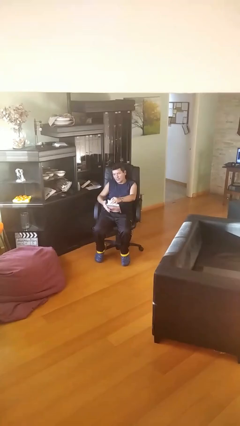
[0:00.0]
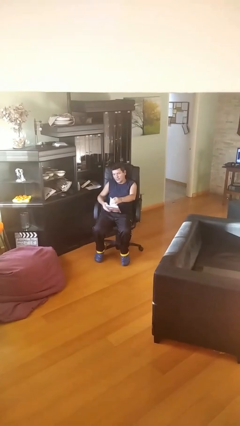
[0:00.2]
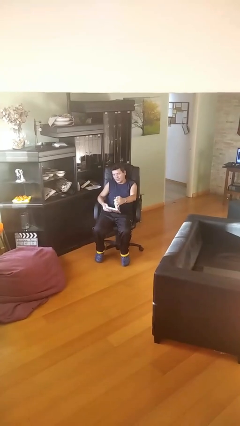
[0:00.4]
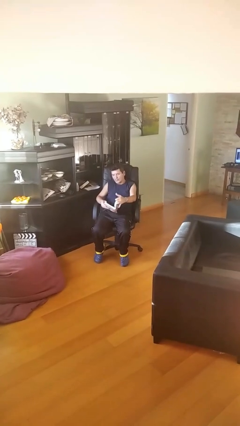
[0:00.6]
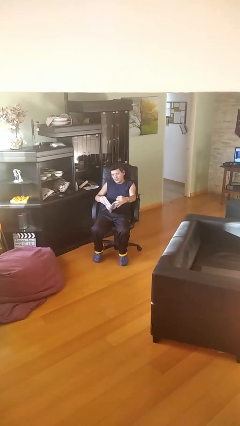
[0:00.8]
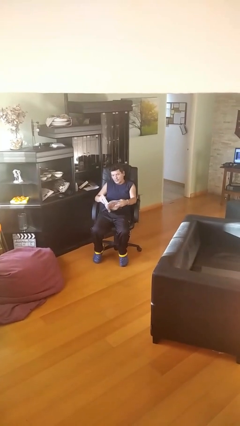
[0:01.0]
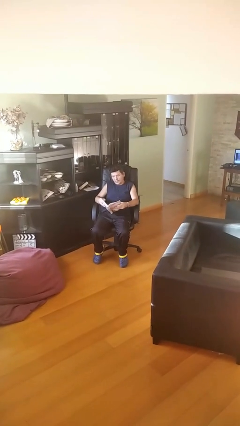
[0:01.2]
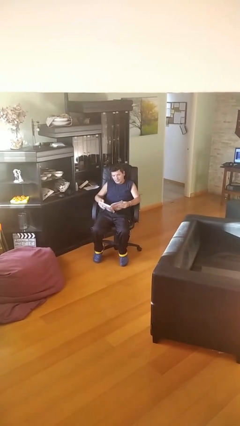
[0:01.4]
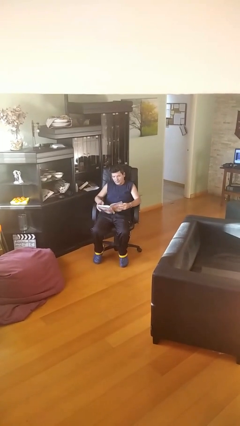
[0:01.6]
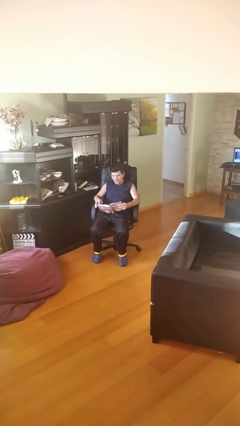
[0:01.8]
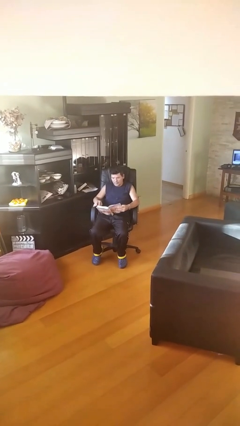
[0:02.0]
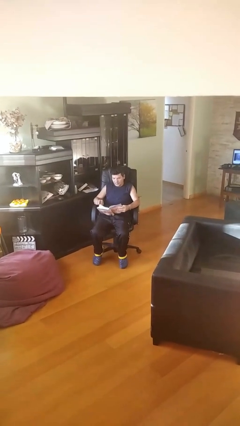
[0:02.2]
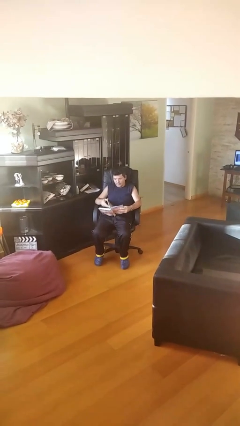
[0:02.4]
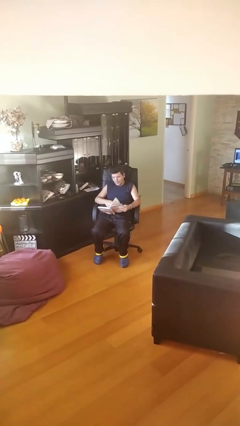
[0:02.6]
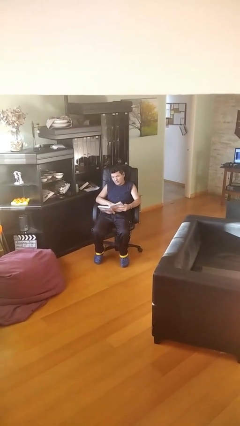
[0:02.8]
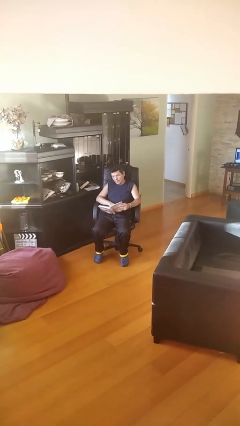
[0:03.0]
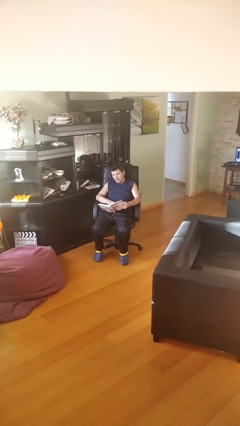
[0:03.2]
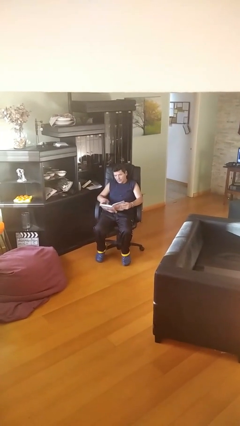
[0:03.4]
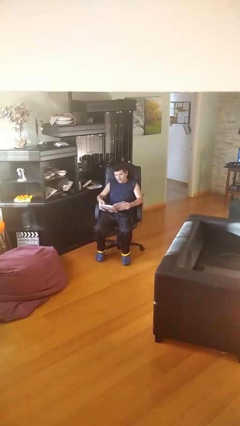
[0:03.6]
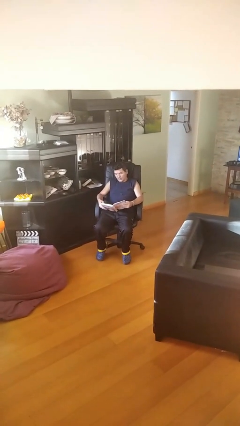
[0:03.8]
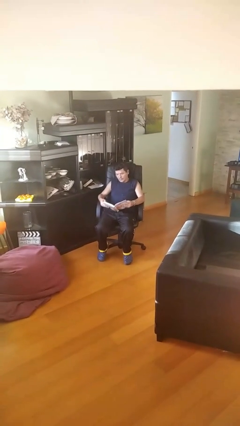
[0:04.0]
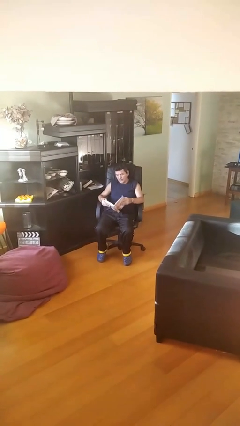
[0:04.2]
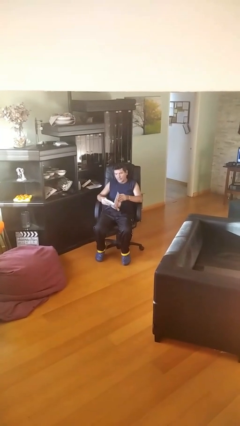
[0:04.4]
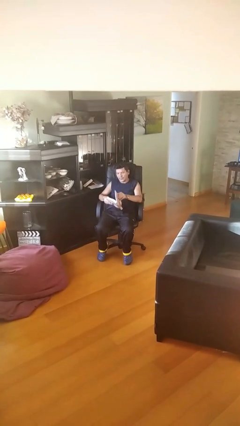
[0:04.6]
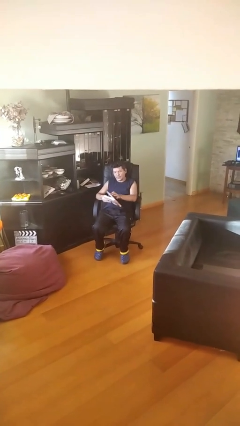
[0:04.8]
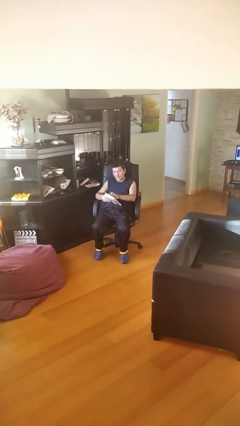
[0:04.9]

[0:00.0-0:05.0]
person reads document

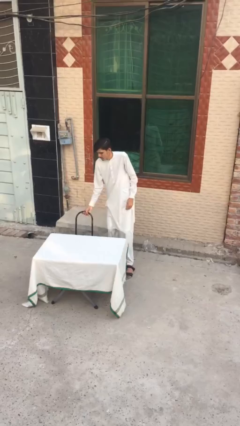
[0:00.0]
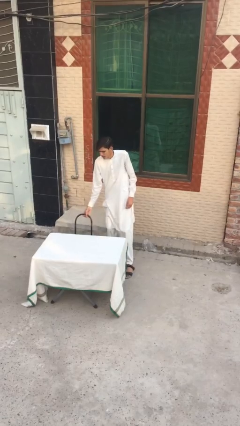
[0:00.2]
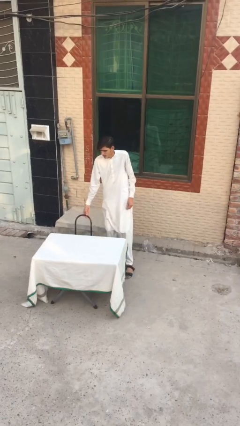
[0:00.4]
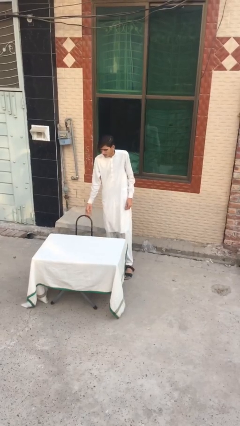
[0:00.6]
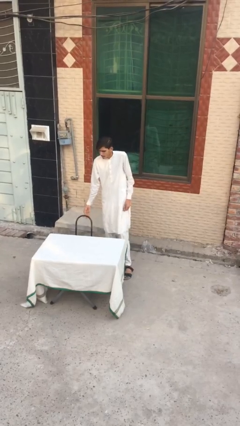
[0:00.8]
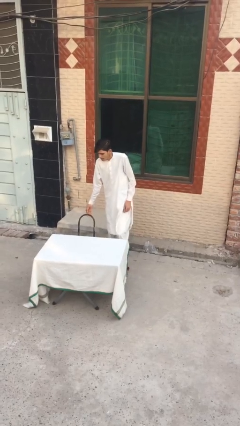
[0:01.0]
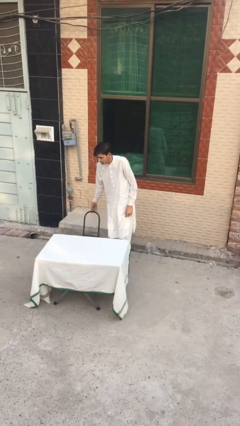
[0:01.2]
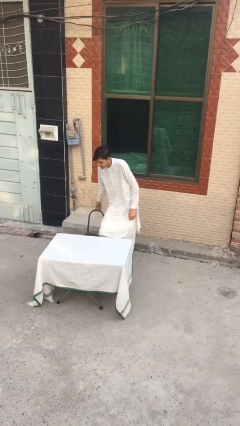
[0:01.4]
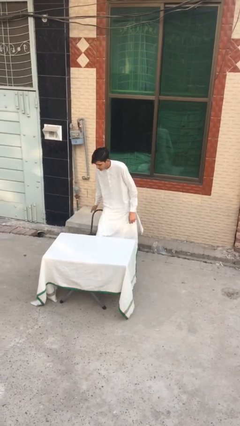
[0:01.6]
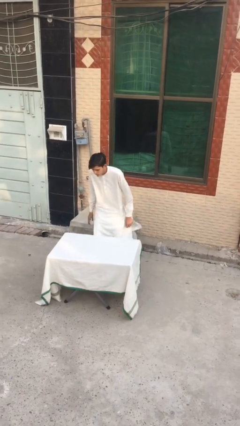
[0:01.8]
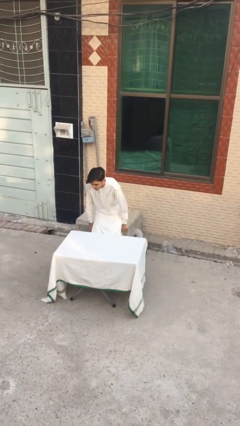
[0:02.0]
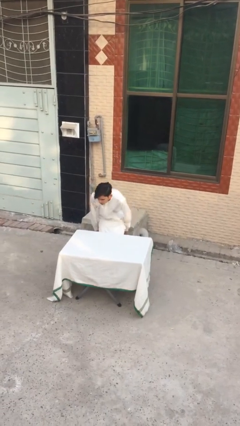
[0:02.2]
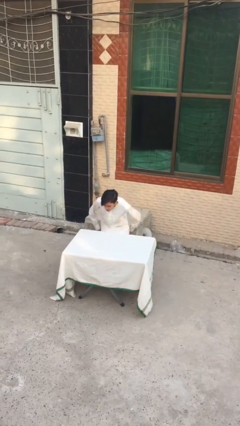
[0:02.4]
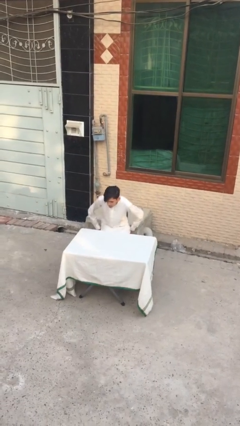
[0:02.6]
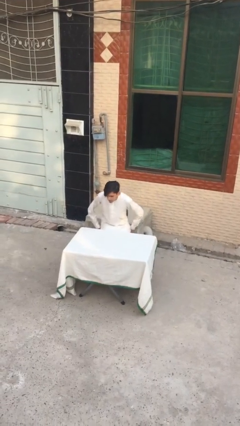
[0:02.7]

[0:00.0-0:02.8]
person sits down

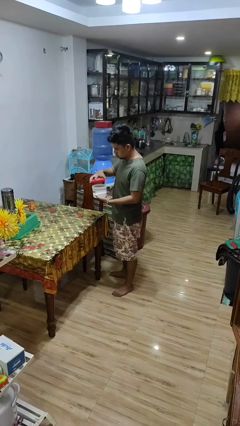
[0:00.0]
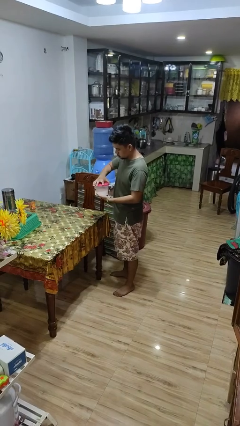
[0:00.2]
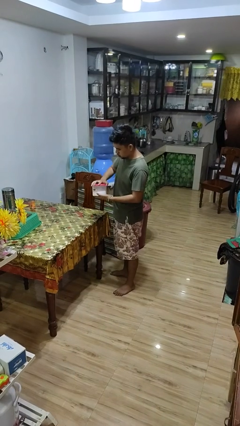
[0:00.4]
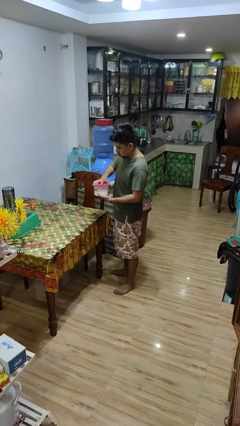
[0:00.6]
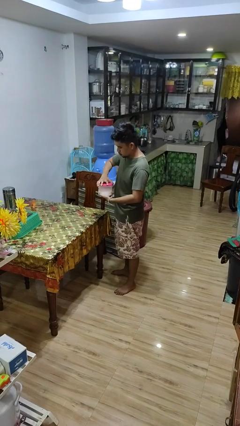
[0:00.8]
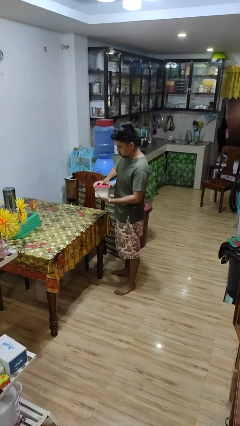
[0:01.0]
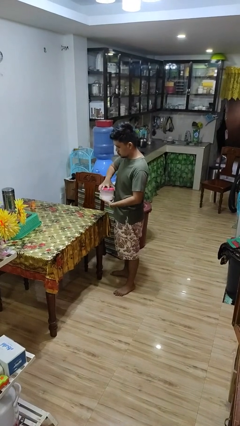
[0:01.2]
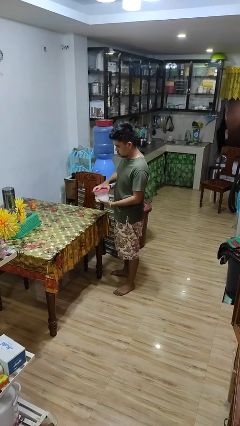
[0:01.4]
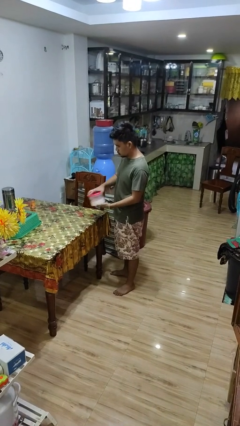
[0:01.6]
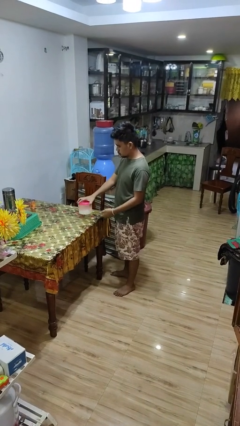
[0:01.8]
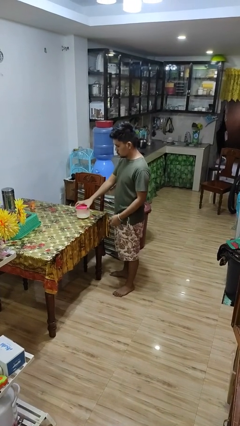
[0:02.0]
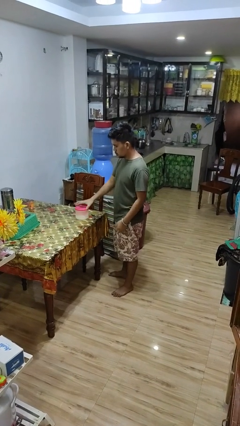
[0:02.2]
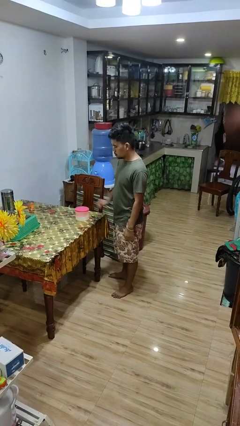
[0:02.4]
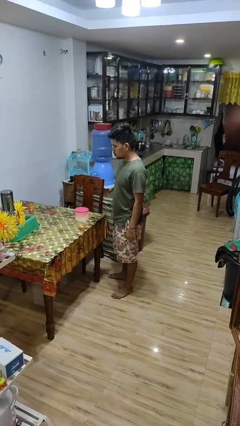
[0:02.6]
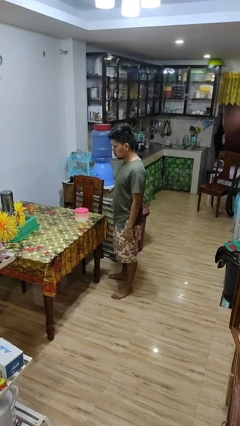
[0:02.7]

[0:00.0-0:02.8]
person closes jar

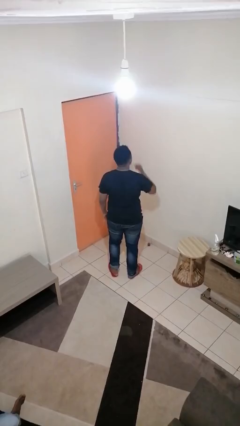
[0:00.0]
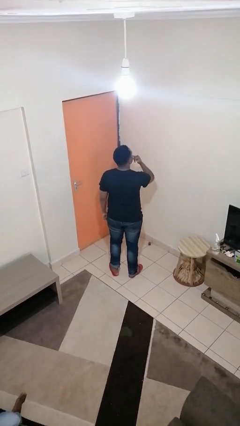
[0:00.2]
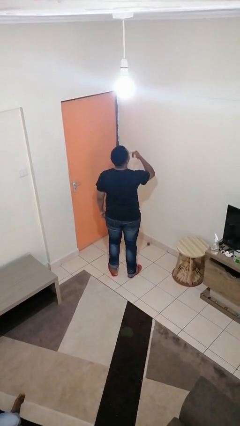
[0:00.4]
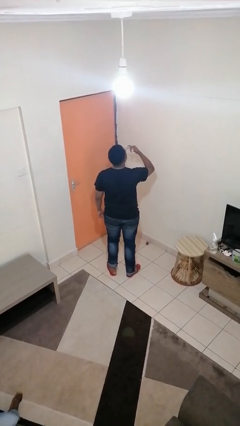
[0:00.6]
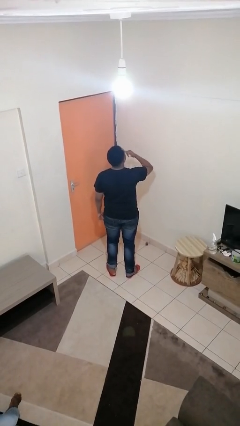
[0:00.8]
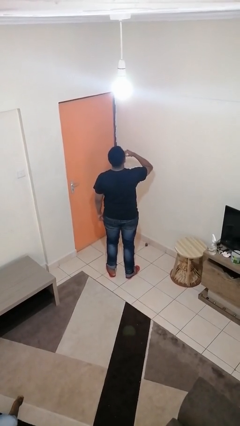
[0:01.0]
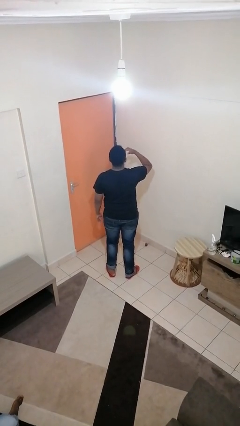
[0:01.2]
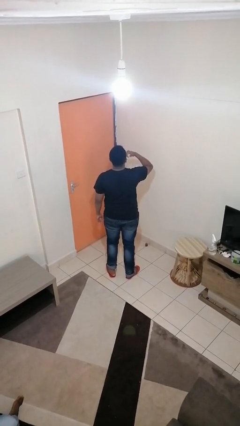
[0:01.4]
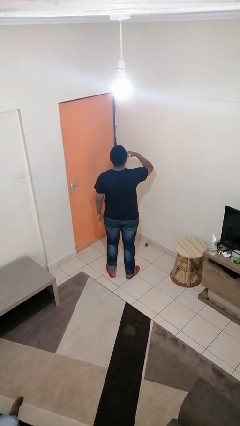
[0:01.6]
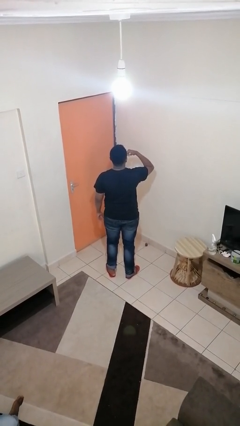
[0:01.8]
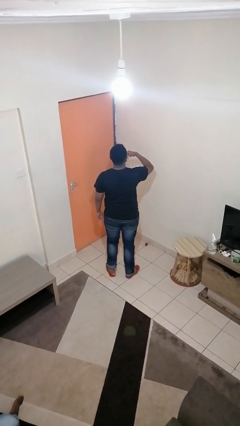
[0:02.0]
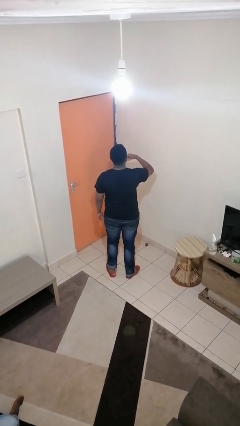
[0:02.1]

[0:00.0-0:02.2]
person licks fingers

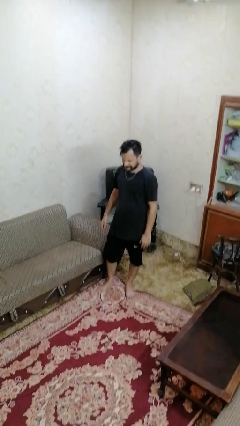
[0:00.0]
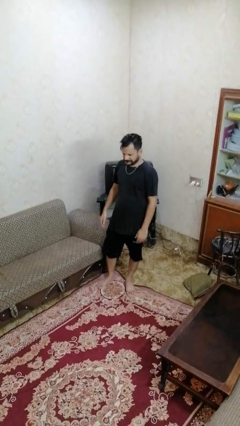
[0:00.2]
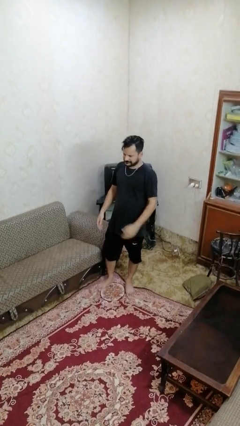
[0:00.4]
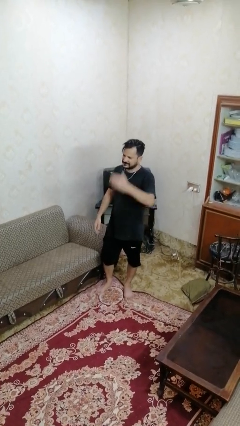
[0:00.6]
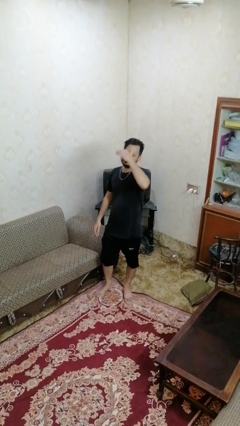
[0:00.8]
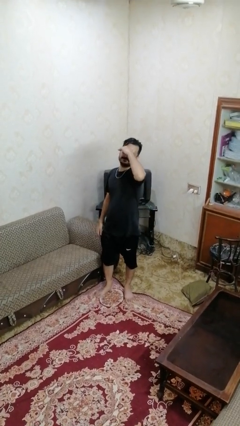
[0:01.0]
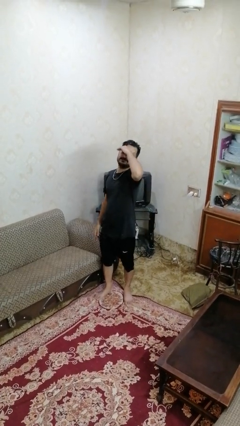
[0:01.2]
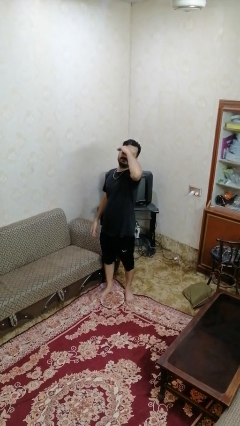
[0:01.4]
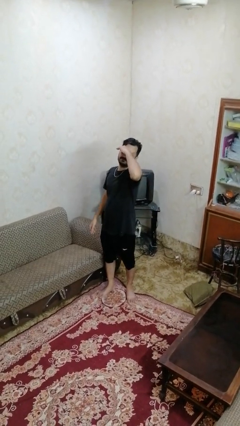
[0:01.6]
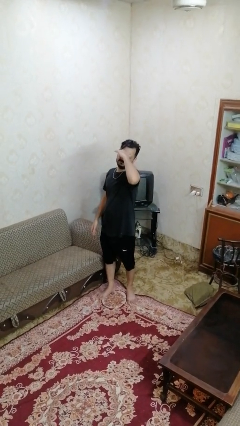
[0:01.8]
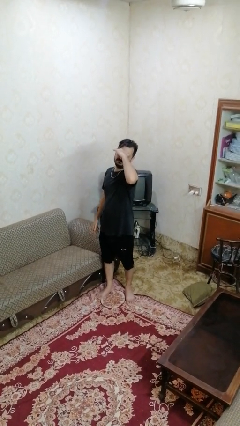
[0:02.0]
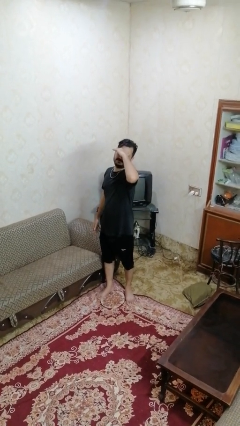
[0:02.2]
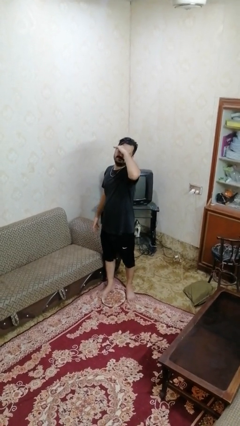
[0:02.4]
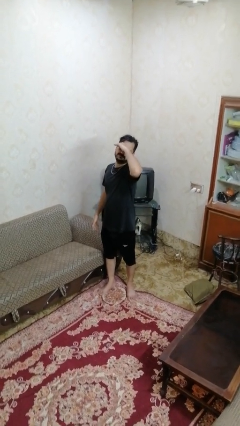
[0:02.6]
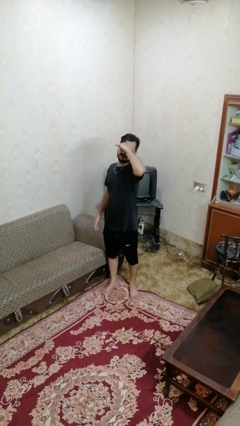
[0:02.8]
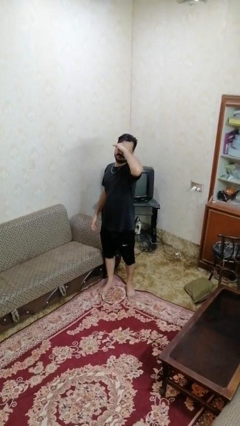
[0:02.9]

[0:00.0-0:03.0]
person shades eyes

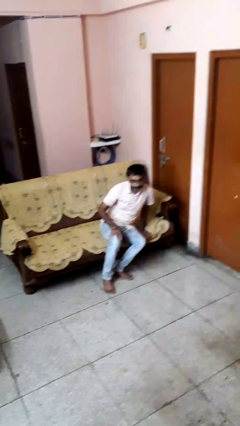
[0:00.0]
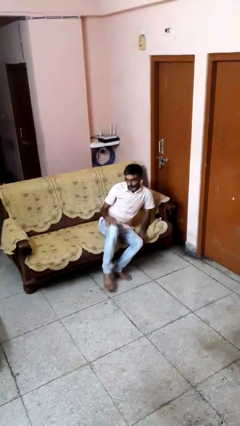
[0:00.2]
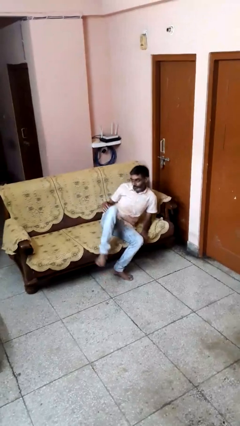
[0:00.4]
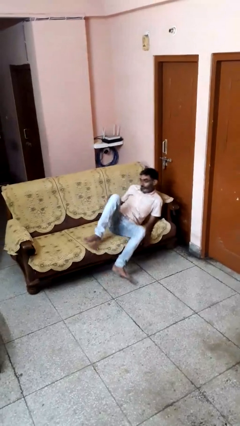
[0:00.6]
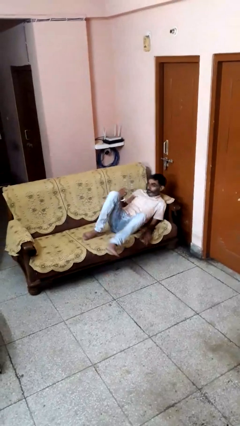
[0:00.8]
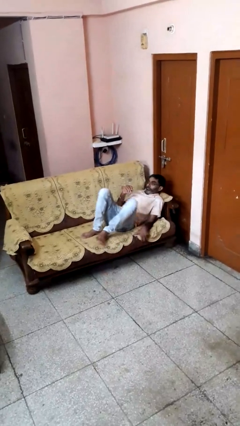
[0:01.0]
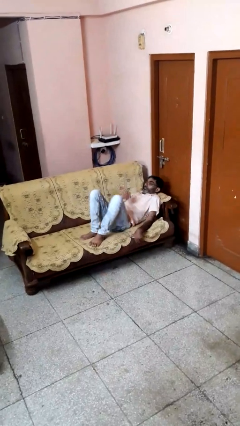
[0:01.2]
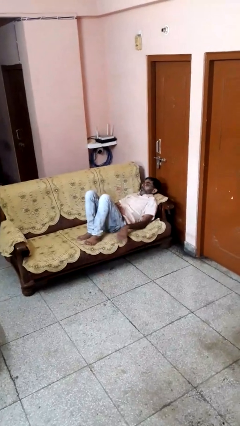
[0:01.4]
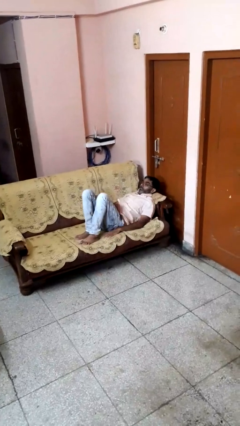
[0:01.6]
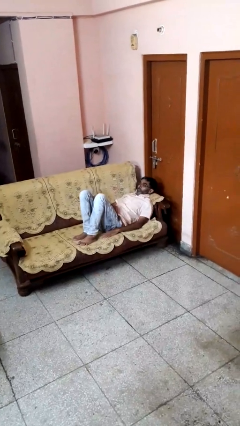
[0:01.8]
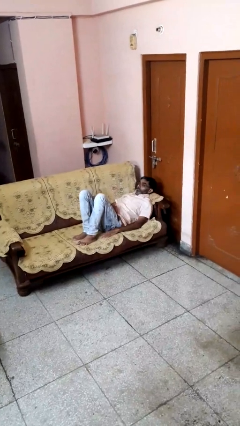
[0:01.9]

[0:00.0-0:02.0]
person lies down on couch
